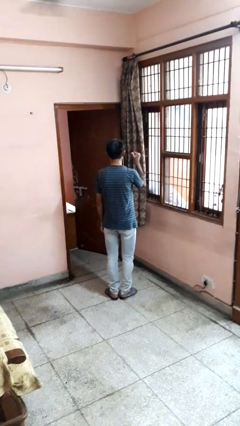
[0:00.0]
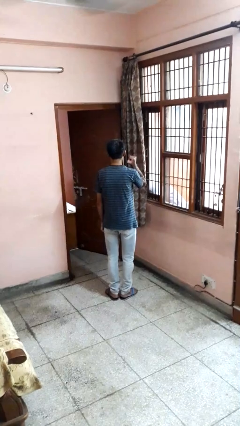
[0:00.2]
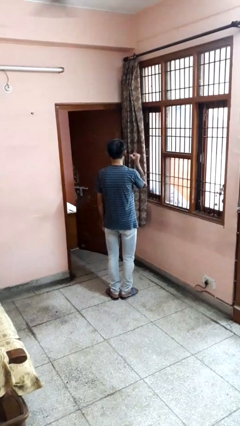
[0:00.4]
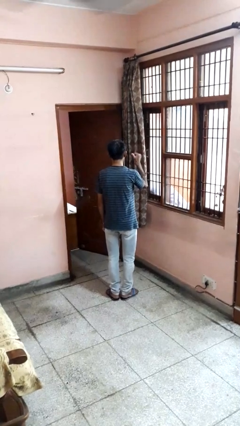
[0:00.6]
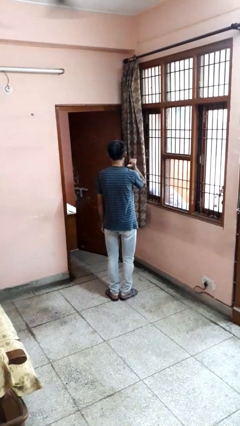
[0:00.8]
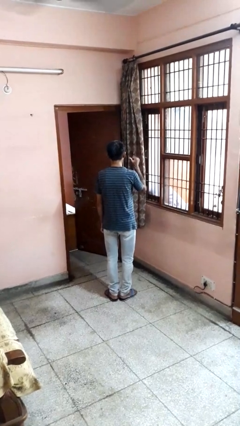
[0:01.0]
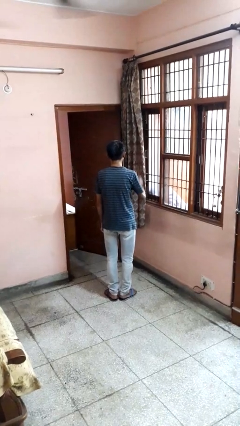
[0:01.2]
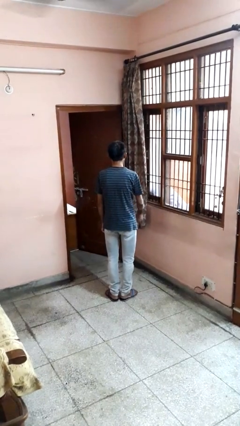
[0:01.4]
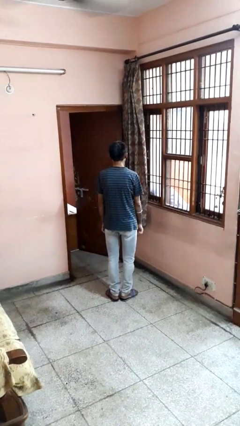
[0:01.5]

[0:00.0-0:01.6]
person gestures behind me

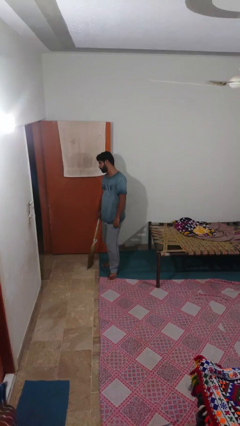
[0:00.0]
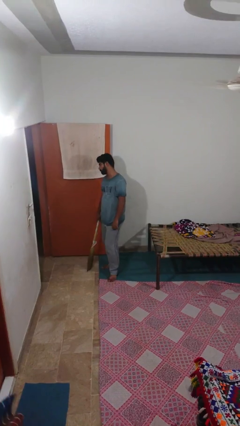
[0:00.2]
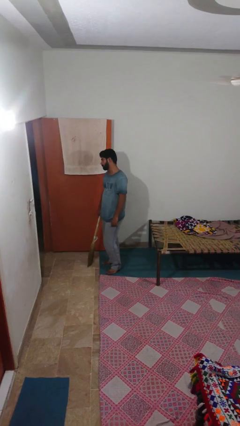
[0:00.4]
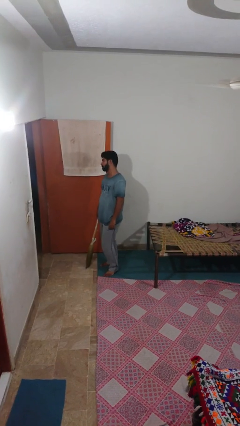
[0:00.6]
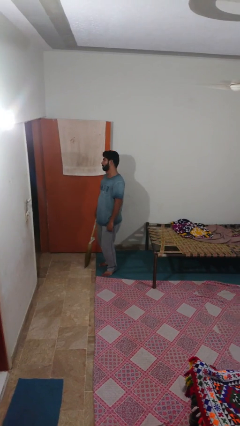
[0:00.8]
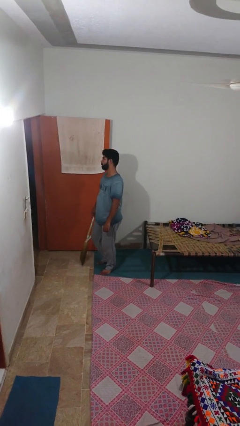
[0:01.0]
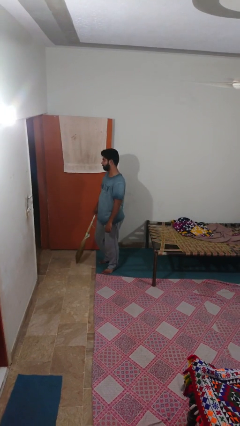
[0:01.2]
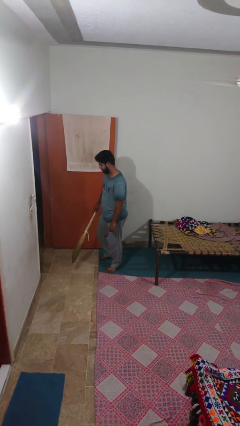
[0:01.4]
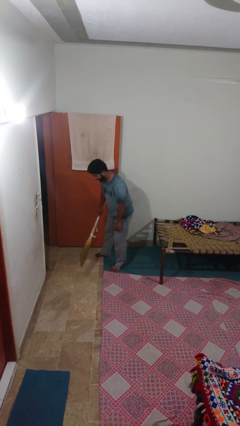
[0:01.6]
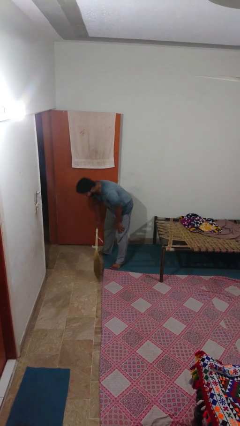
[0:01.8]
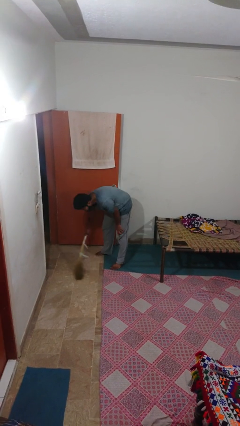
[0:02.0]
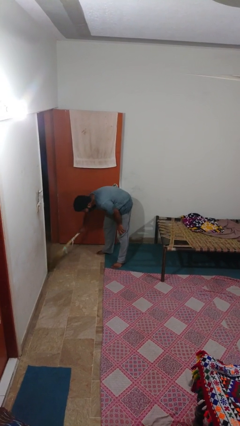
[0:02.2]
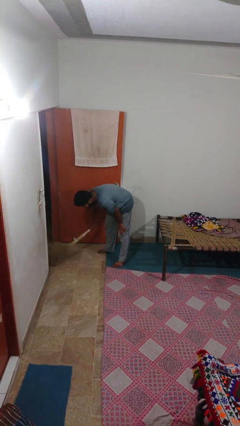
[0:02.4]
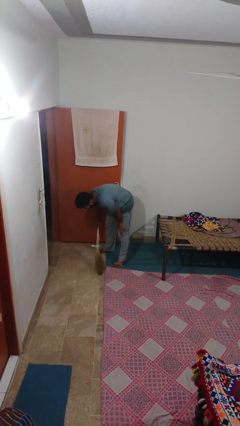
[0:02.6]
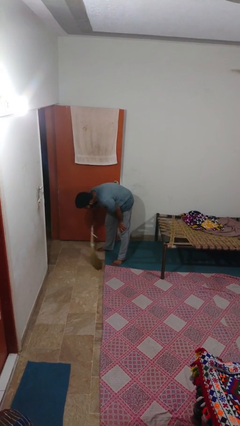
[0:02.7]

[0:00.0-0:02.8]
person sweeps floor

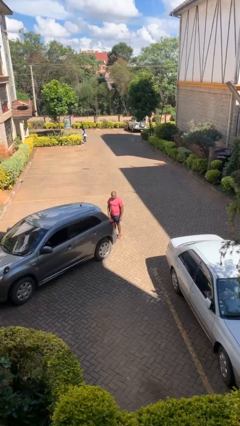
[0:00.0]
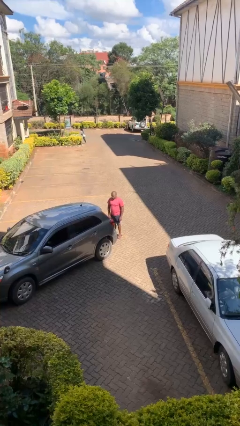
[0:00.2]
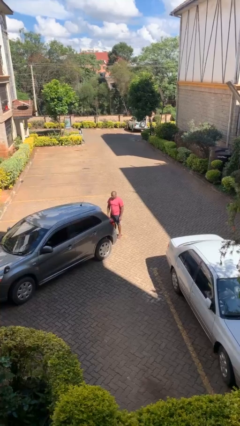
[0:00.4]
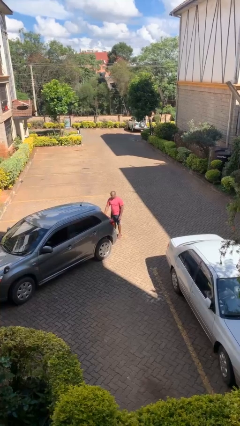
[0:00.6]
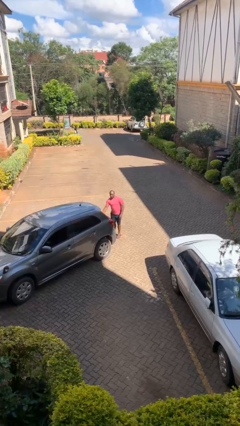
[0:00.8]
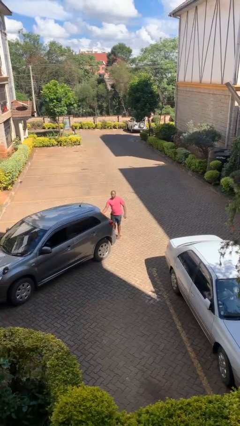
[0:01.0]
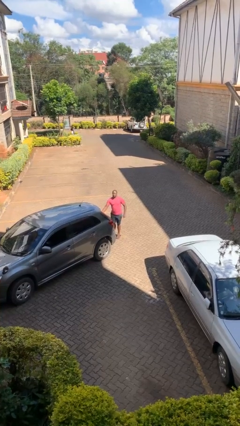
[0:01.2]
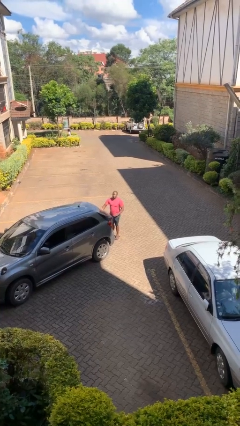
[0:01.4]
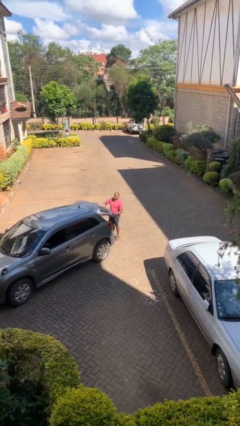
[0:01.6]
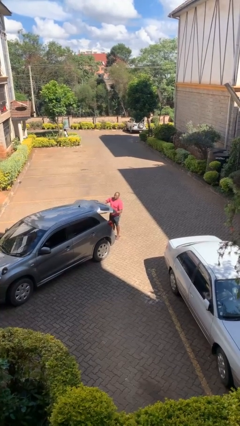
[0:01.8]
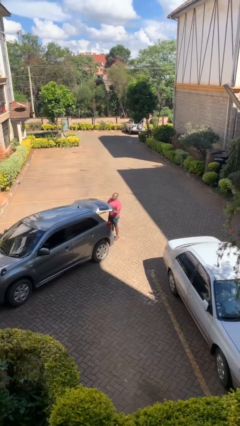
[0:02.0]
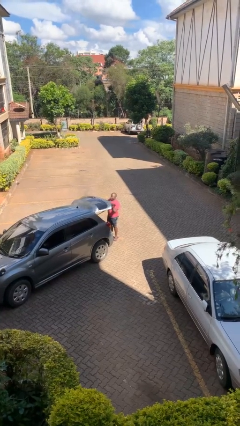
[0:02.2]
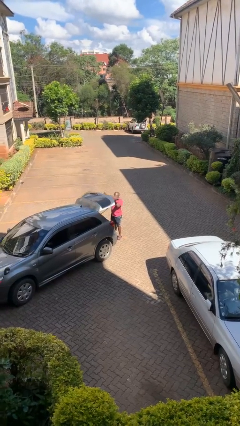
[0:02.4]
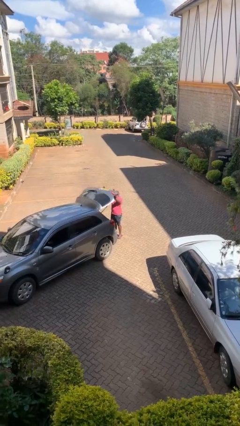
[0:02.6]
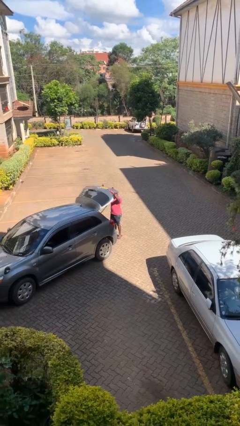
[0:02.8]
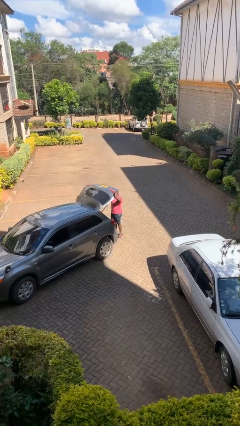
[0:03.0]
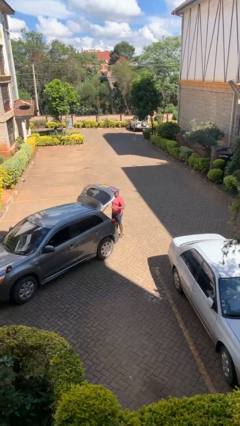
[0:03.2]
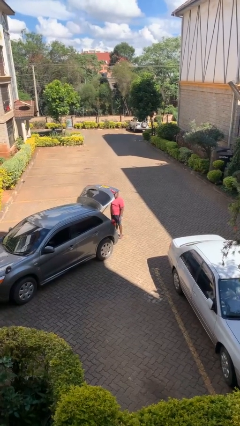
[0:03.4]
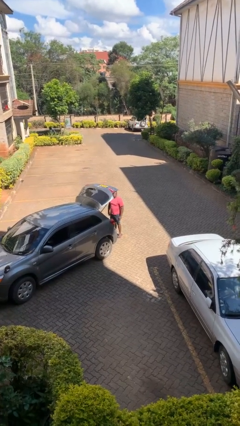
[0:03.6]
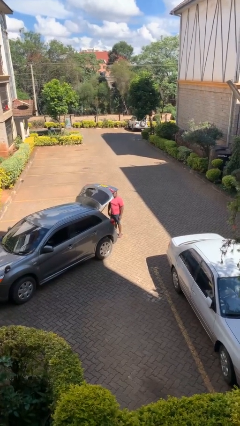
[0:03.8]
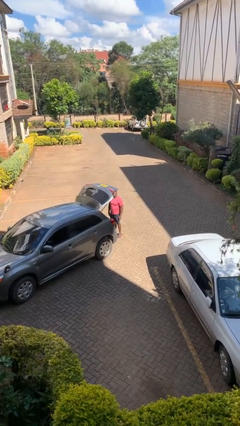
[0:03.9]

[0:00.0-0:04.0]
person opens car trunk

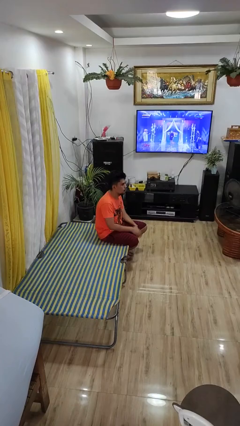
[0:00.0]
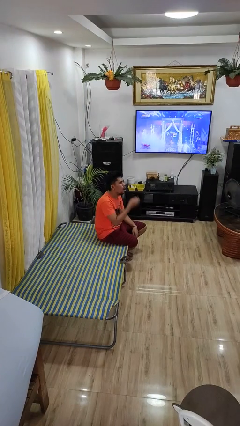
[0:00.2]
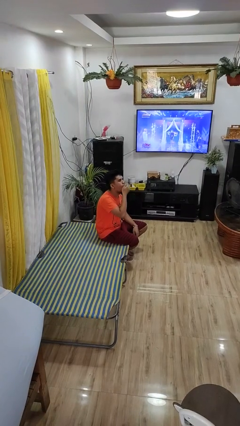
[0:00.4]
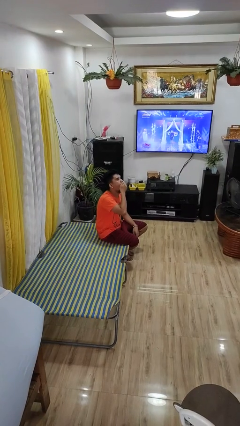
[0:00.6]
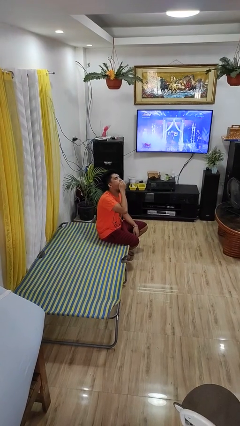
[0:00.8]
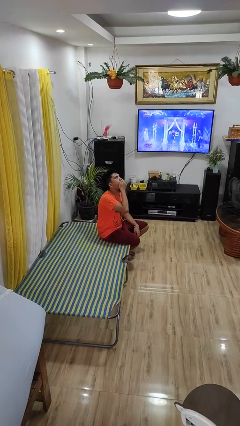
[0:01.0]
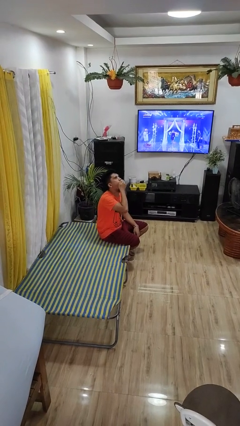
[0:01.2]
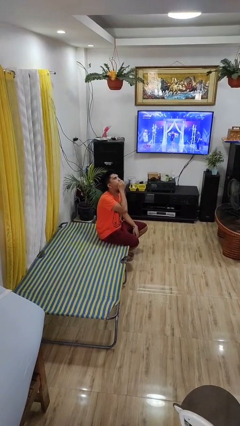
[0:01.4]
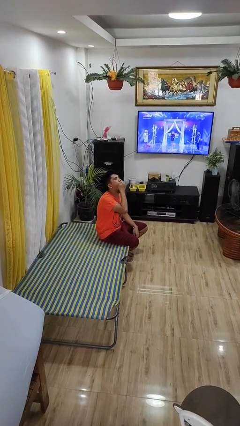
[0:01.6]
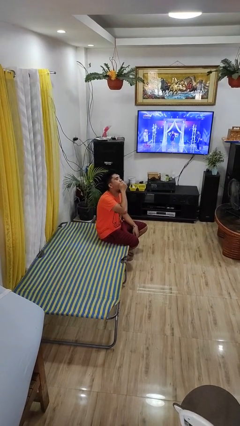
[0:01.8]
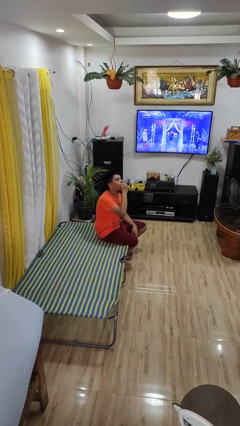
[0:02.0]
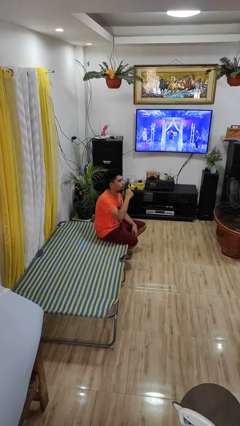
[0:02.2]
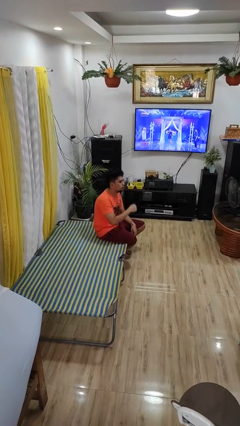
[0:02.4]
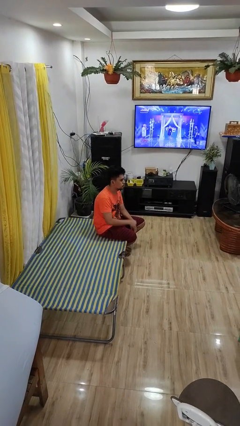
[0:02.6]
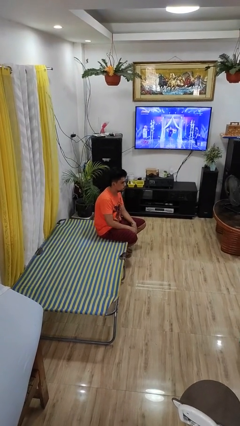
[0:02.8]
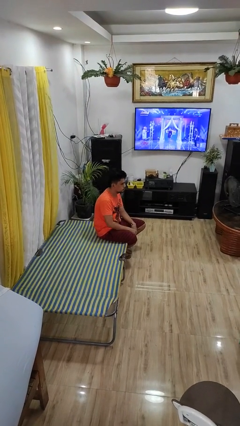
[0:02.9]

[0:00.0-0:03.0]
person yawns

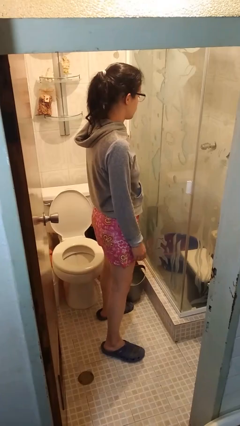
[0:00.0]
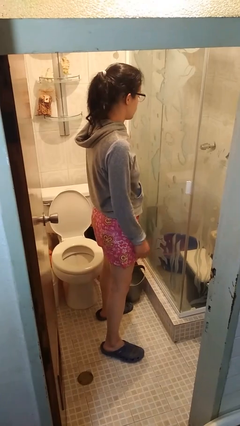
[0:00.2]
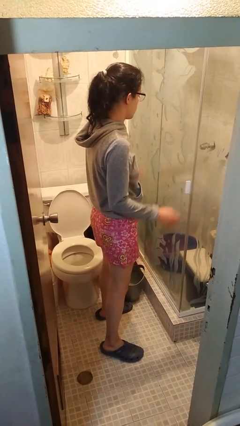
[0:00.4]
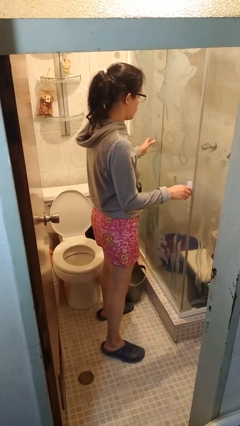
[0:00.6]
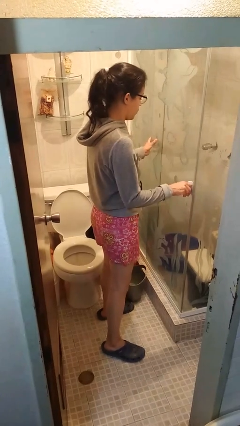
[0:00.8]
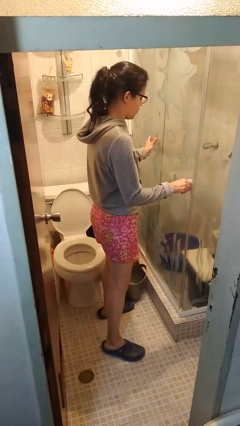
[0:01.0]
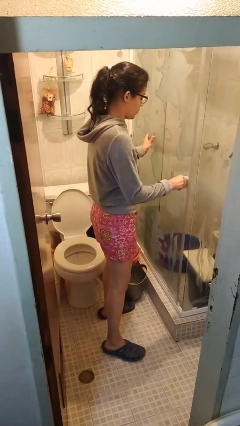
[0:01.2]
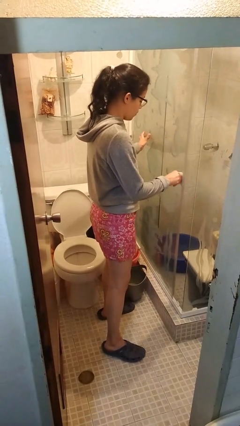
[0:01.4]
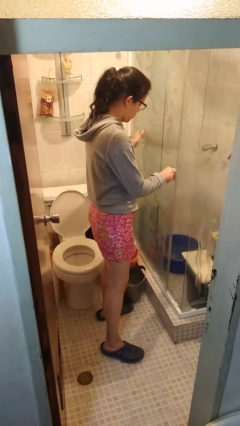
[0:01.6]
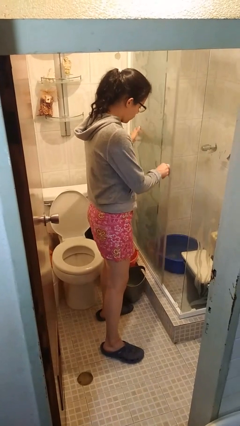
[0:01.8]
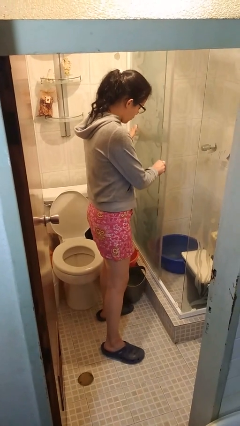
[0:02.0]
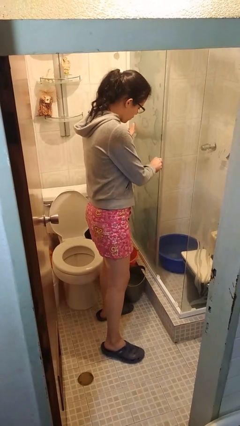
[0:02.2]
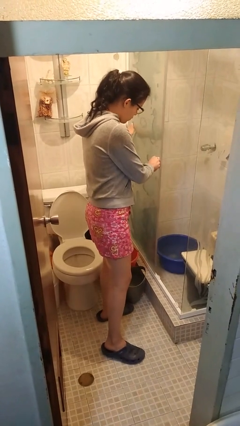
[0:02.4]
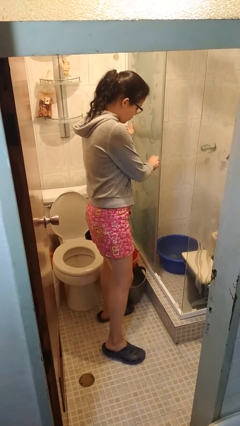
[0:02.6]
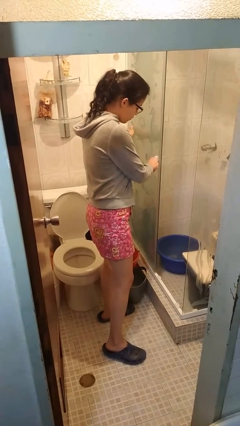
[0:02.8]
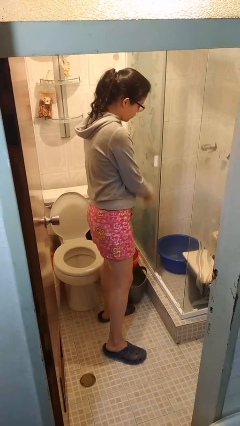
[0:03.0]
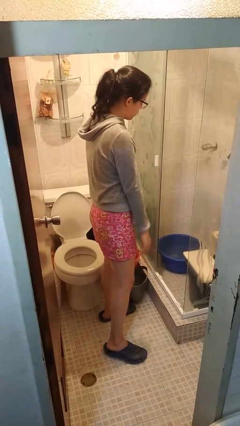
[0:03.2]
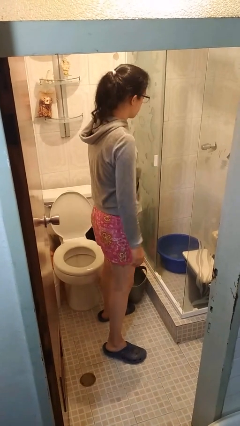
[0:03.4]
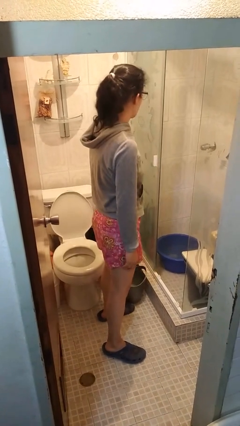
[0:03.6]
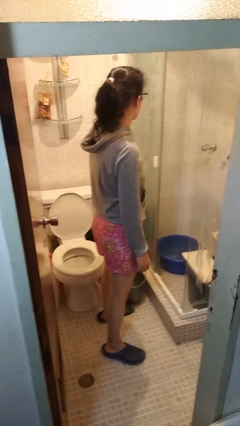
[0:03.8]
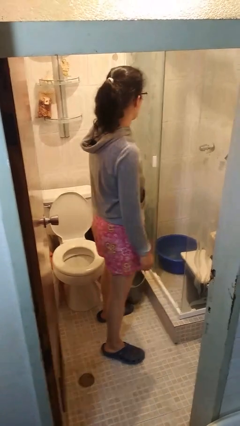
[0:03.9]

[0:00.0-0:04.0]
person opens sliding door

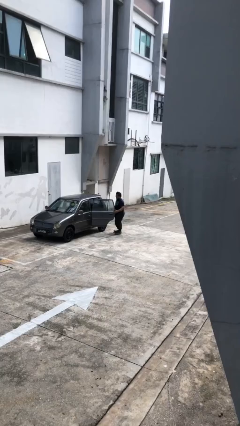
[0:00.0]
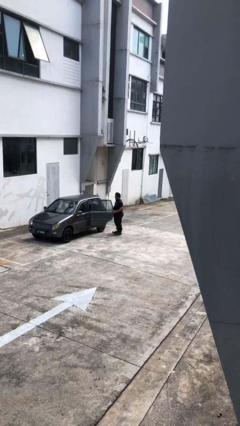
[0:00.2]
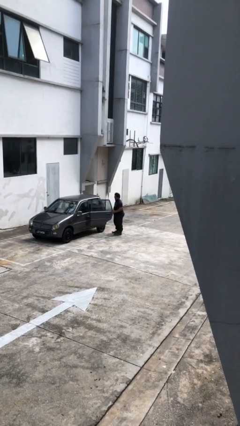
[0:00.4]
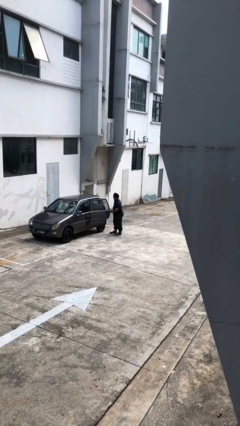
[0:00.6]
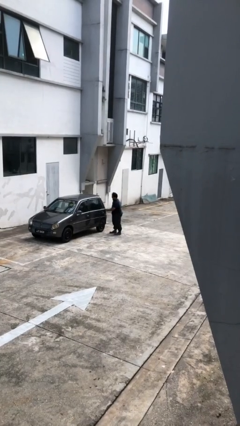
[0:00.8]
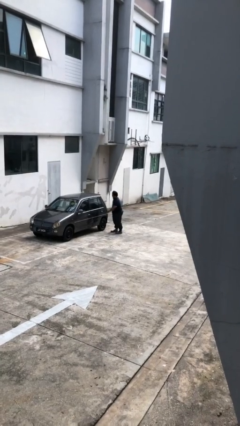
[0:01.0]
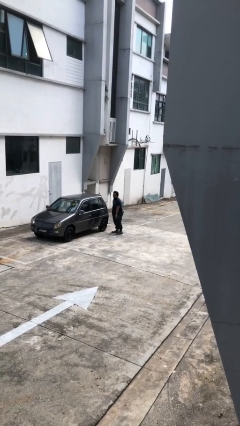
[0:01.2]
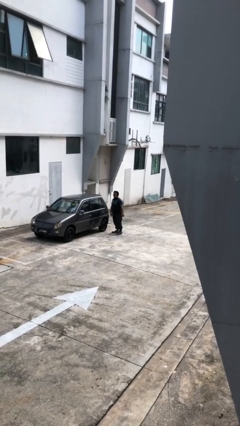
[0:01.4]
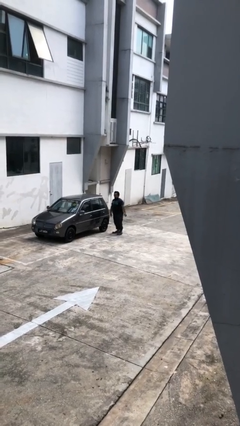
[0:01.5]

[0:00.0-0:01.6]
person closes car door

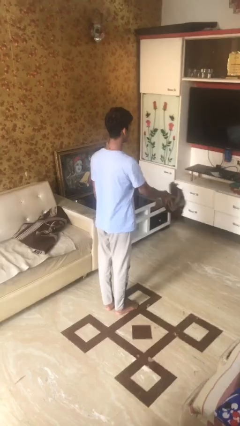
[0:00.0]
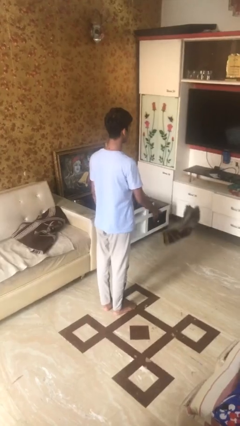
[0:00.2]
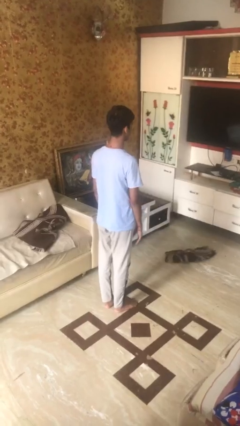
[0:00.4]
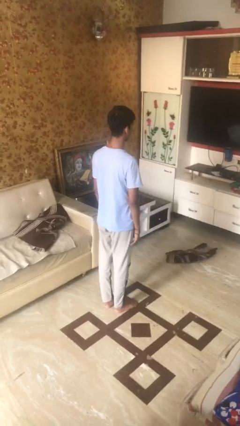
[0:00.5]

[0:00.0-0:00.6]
person throws object to ground
